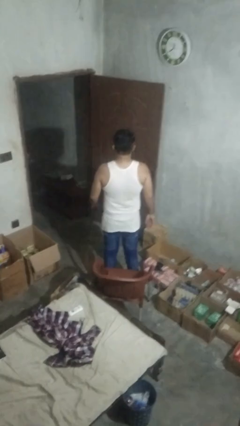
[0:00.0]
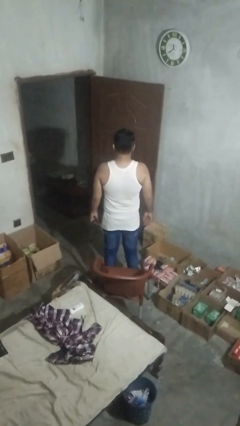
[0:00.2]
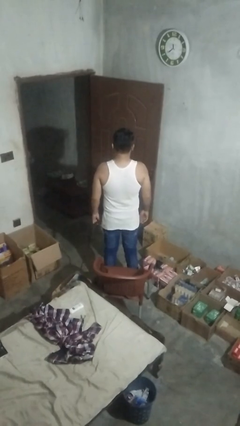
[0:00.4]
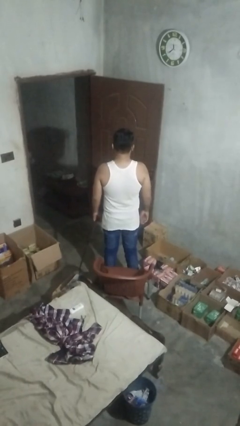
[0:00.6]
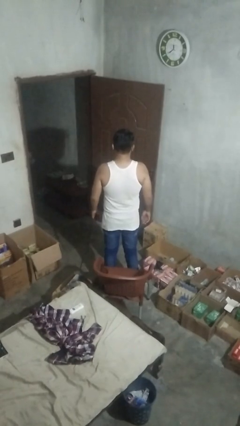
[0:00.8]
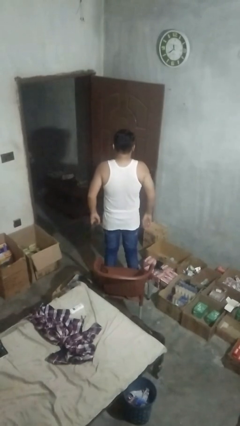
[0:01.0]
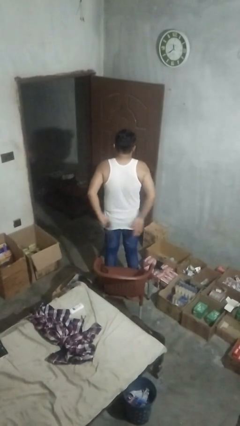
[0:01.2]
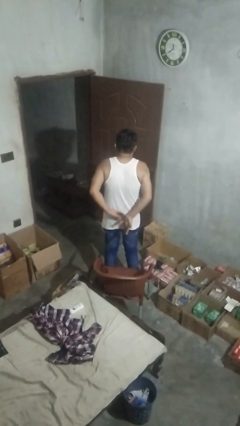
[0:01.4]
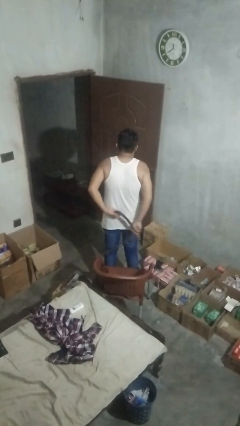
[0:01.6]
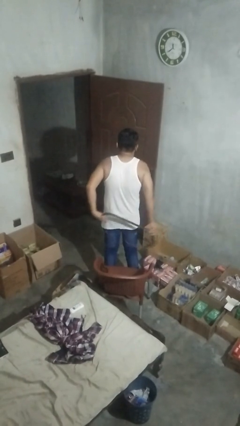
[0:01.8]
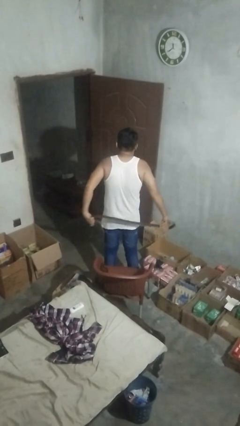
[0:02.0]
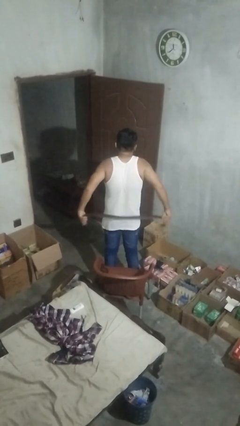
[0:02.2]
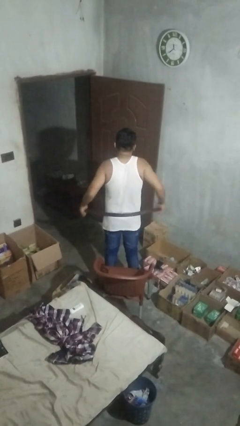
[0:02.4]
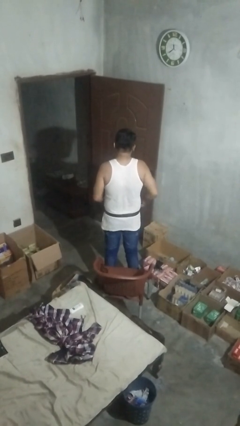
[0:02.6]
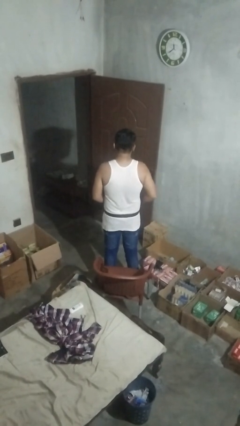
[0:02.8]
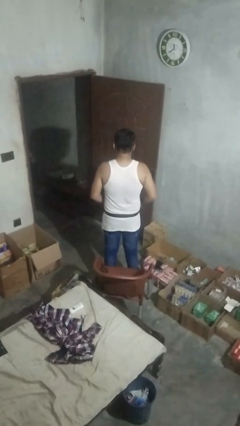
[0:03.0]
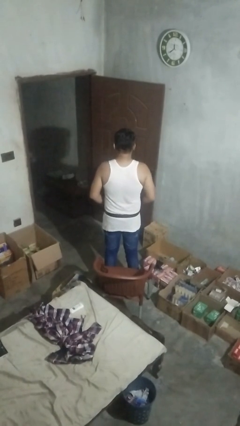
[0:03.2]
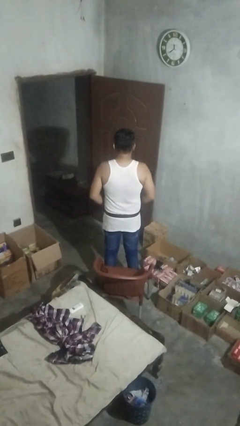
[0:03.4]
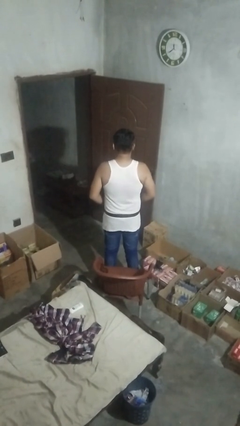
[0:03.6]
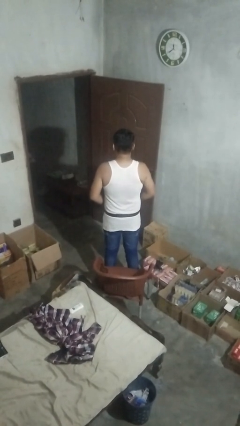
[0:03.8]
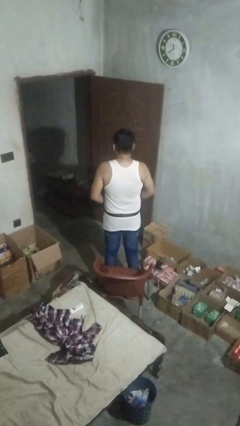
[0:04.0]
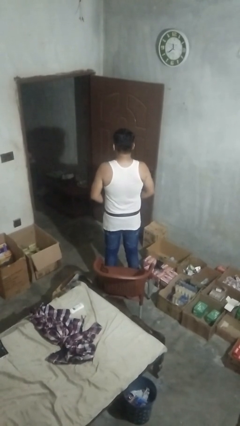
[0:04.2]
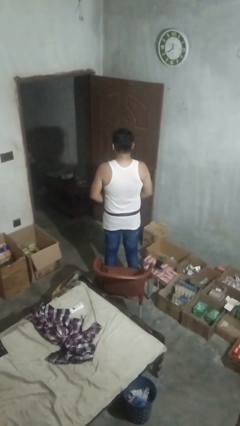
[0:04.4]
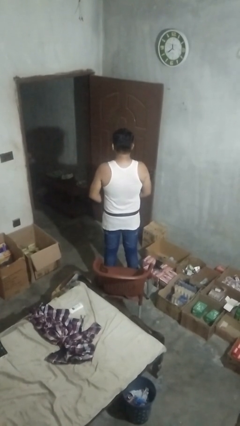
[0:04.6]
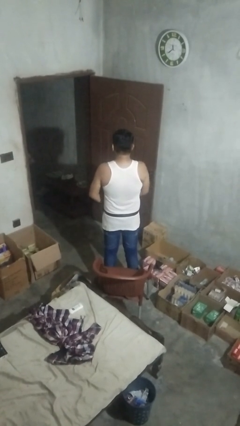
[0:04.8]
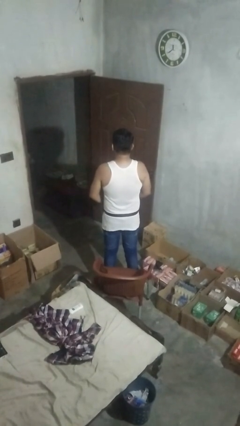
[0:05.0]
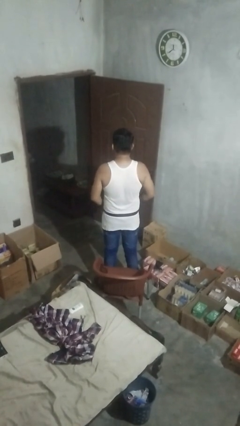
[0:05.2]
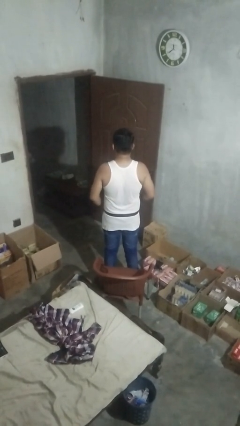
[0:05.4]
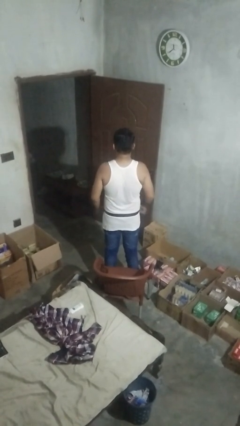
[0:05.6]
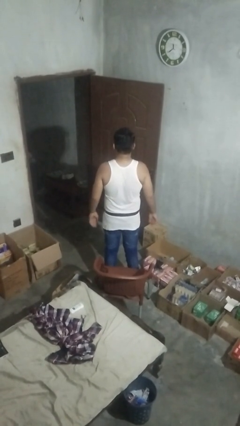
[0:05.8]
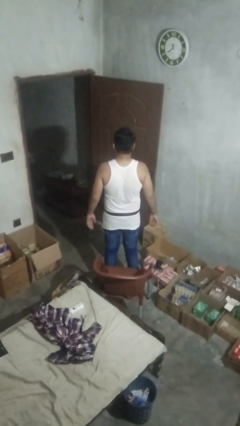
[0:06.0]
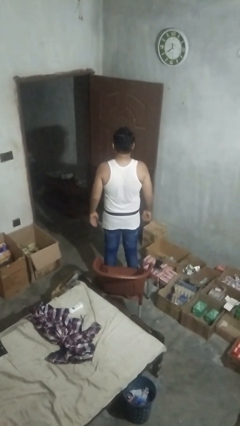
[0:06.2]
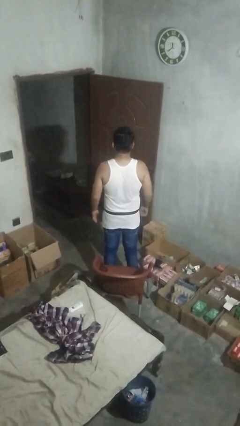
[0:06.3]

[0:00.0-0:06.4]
person puts on belt

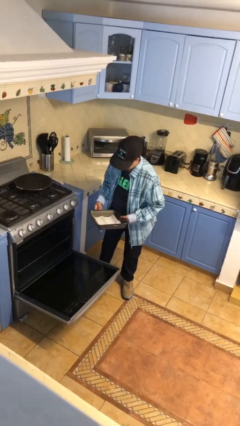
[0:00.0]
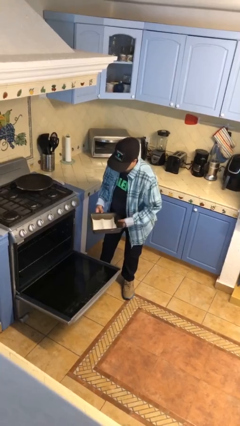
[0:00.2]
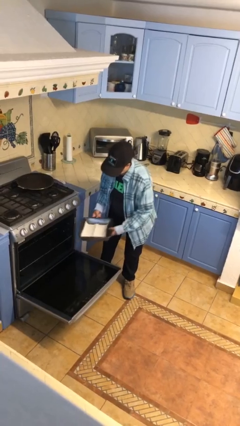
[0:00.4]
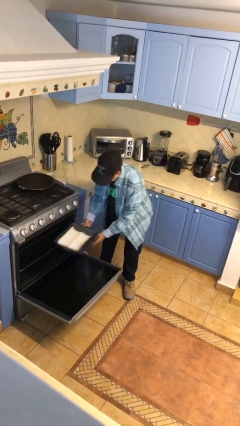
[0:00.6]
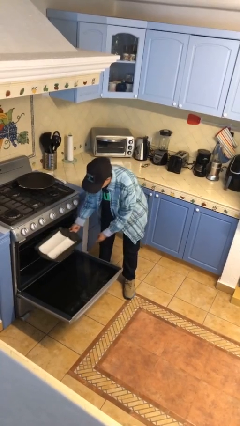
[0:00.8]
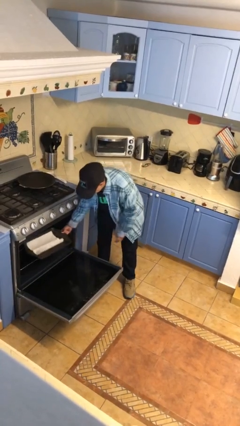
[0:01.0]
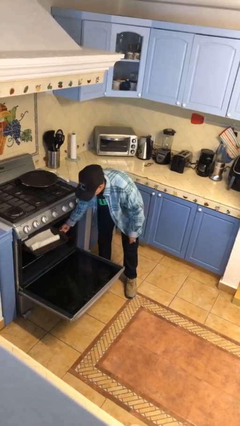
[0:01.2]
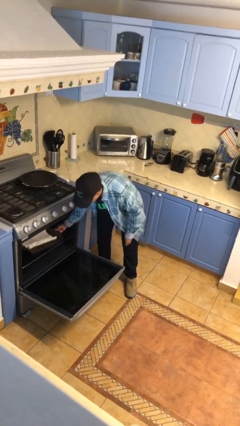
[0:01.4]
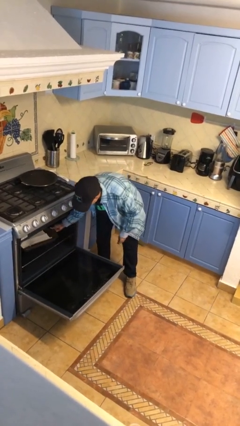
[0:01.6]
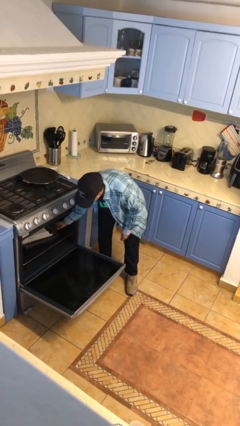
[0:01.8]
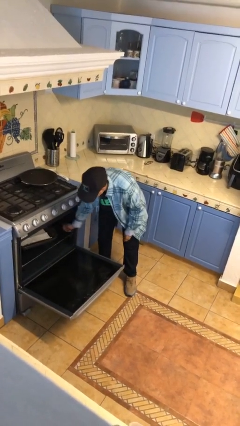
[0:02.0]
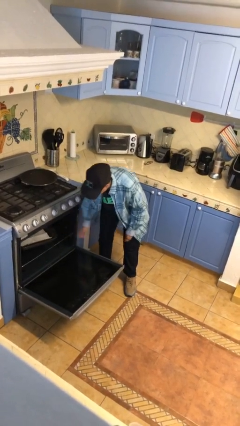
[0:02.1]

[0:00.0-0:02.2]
person puts object into oven

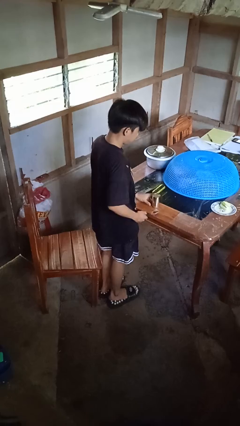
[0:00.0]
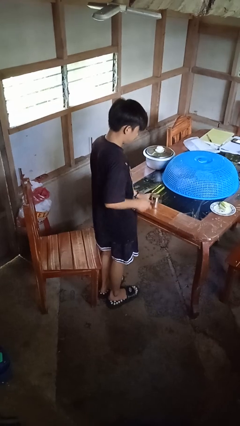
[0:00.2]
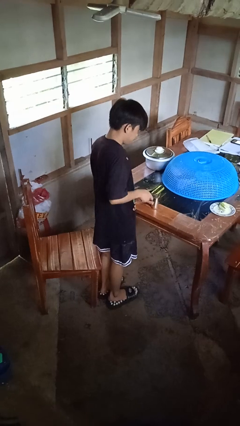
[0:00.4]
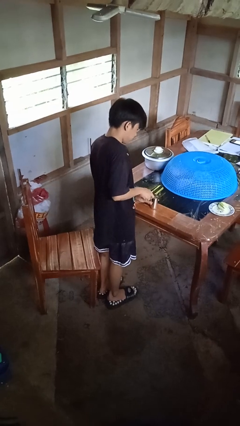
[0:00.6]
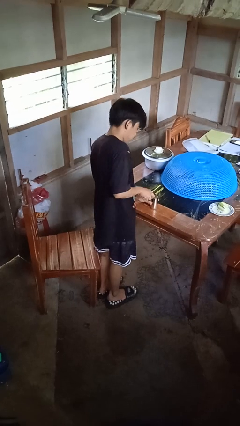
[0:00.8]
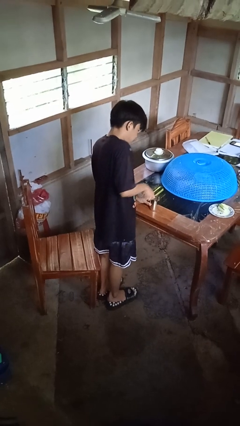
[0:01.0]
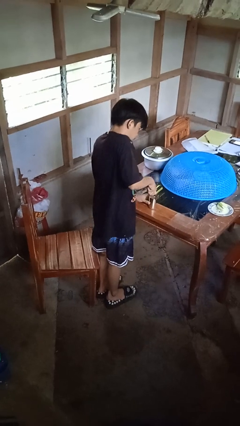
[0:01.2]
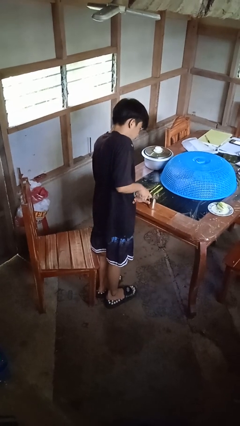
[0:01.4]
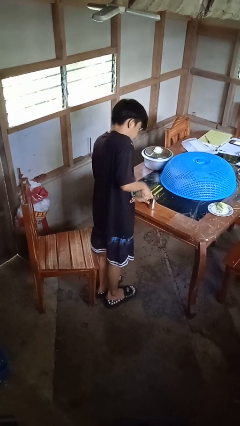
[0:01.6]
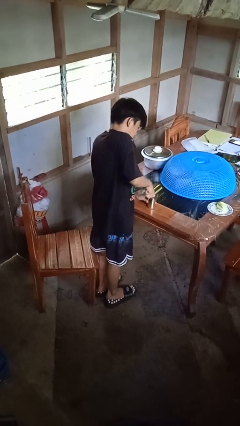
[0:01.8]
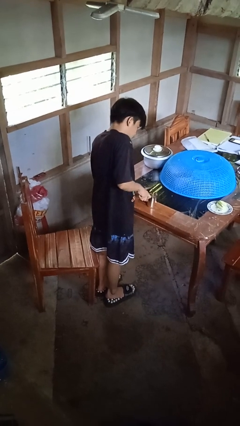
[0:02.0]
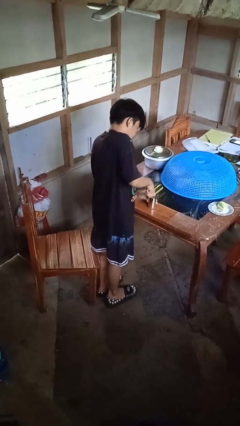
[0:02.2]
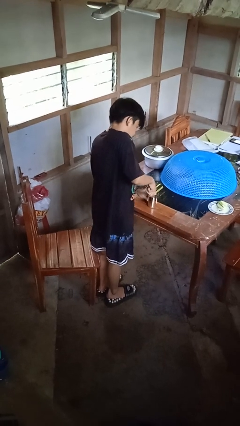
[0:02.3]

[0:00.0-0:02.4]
person opens can with can opener

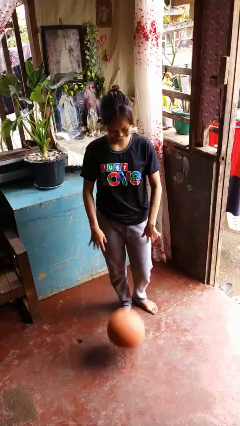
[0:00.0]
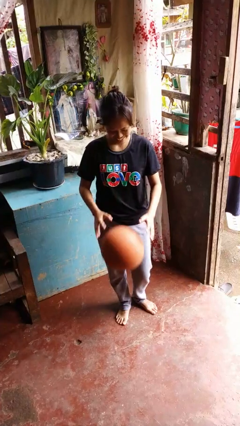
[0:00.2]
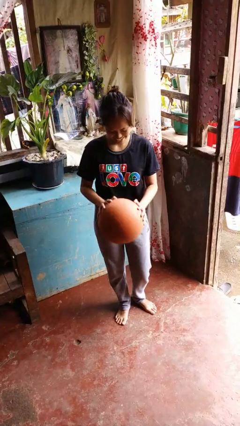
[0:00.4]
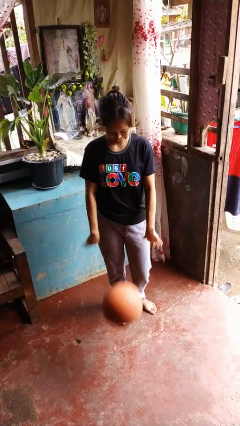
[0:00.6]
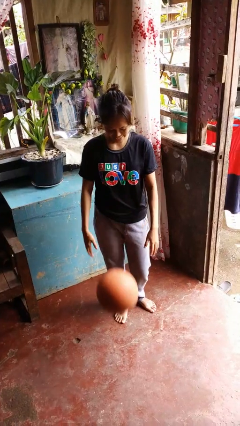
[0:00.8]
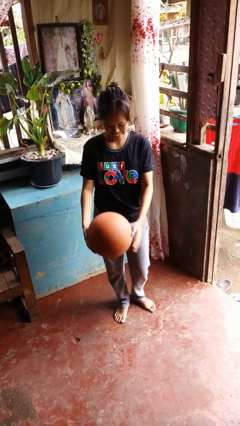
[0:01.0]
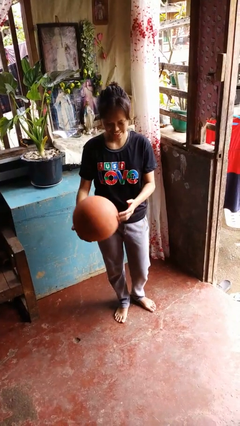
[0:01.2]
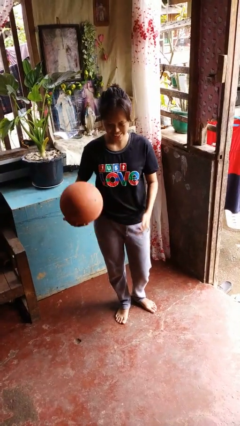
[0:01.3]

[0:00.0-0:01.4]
person bounces ball on floor

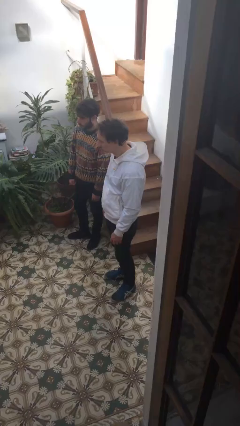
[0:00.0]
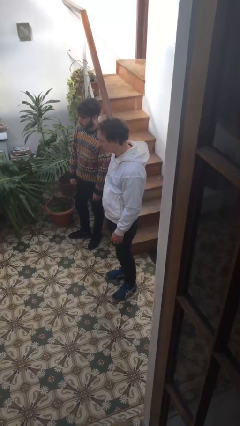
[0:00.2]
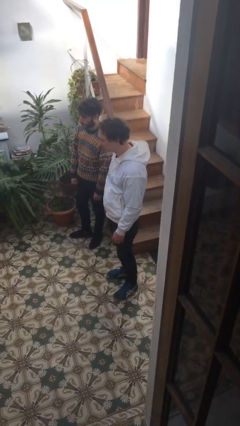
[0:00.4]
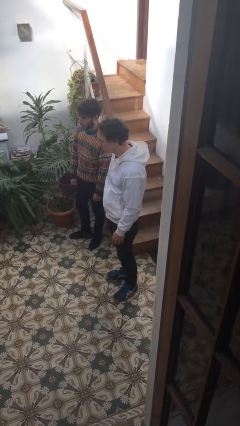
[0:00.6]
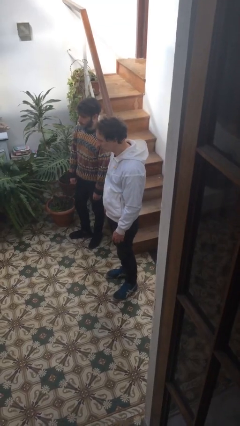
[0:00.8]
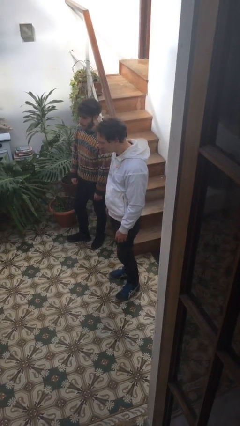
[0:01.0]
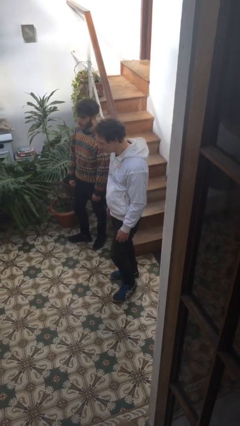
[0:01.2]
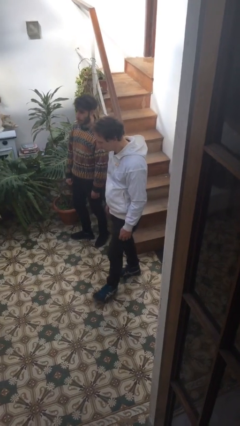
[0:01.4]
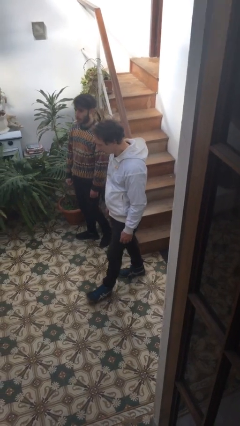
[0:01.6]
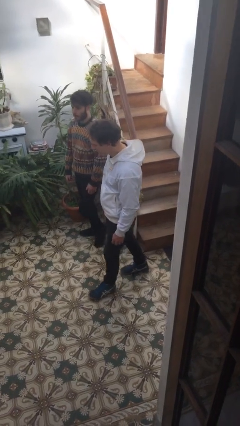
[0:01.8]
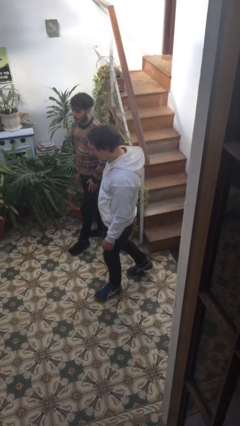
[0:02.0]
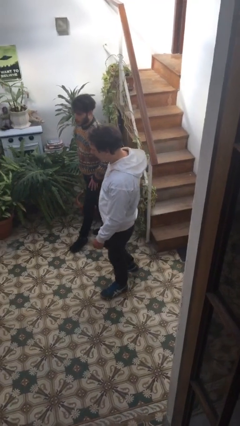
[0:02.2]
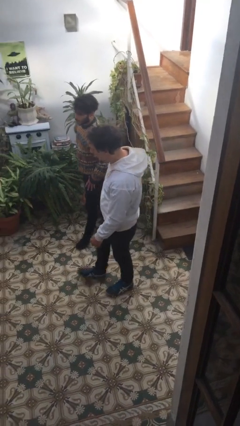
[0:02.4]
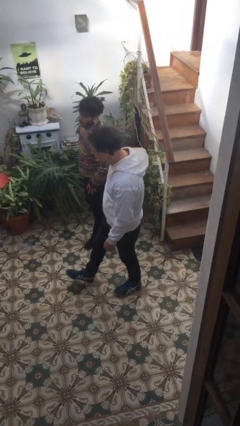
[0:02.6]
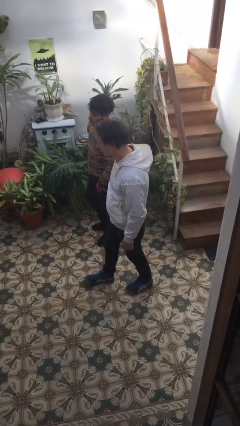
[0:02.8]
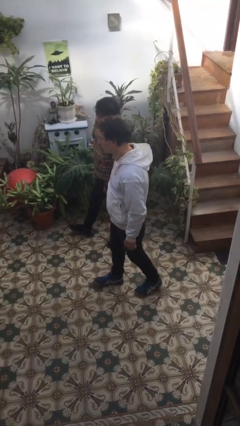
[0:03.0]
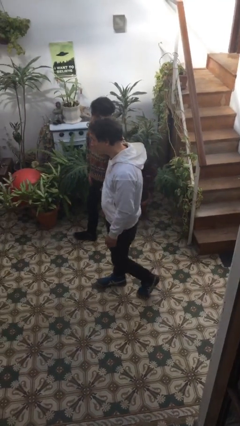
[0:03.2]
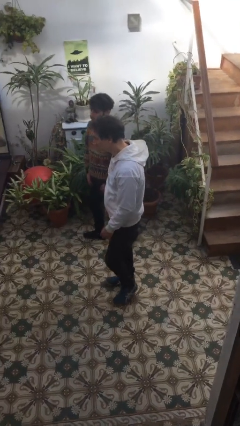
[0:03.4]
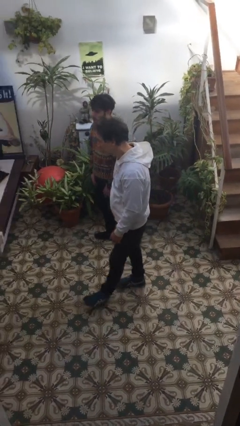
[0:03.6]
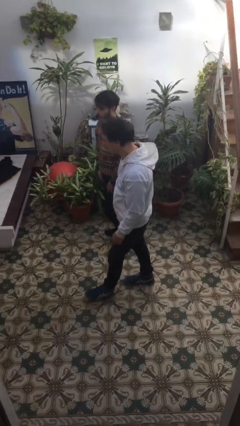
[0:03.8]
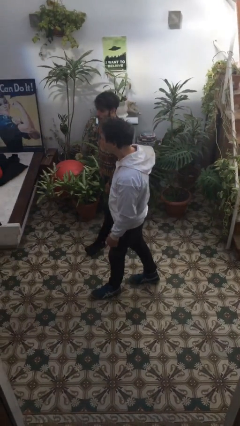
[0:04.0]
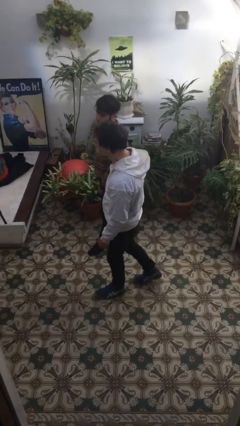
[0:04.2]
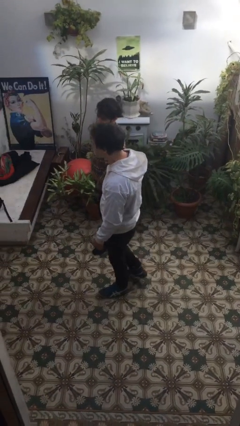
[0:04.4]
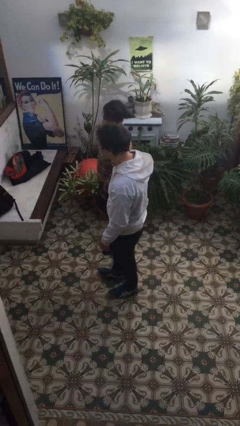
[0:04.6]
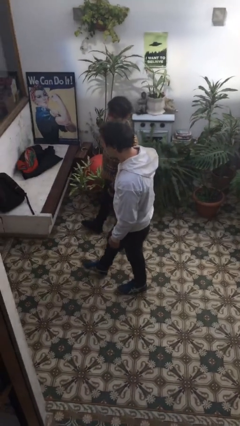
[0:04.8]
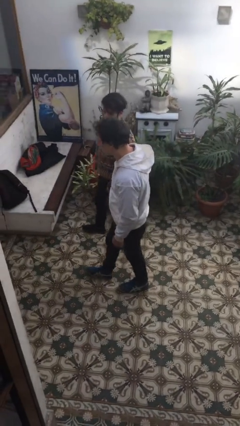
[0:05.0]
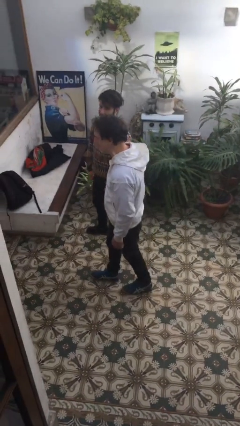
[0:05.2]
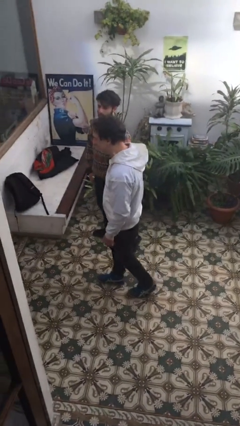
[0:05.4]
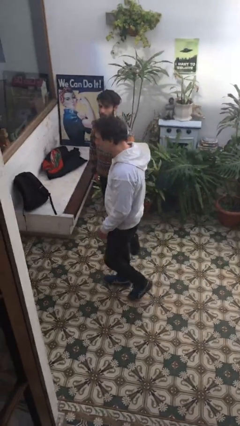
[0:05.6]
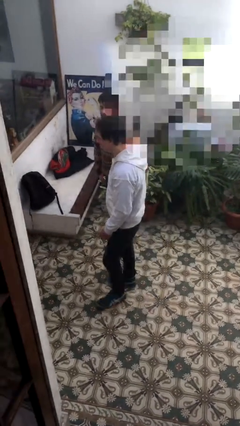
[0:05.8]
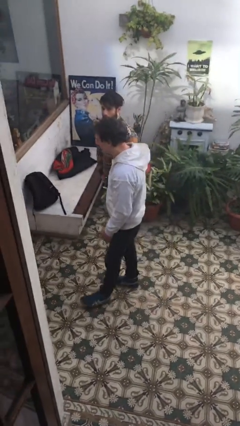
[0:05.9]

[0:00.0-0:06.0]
person talks to person
